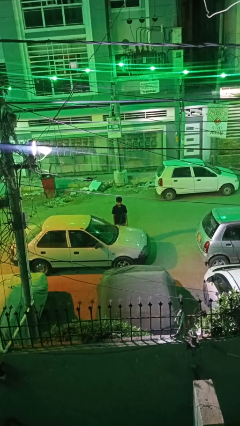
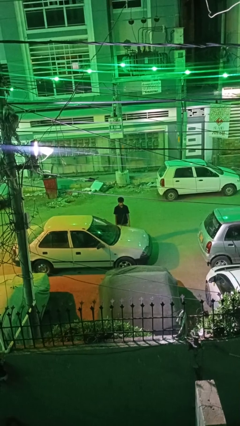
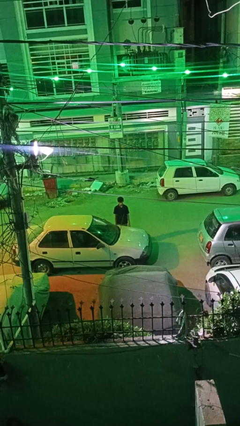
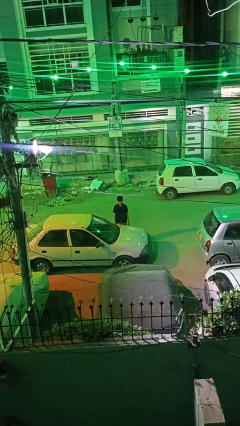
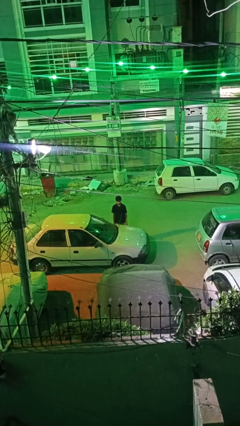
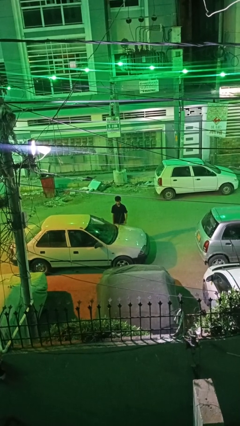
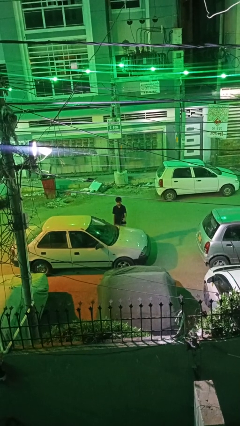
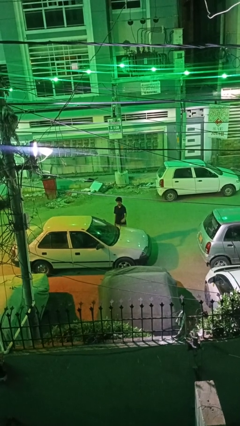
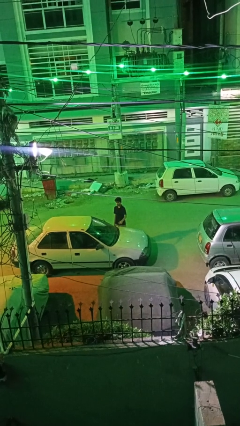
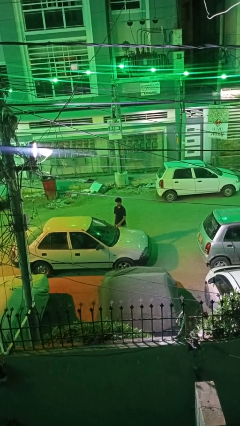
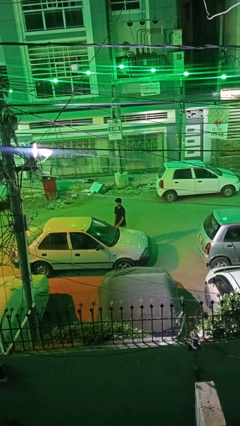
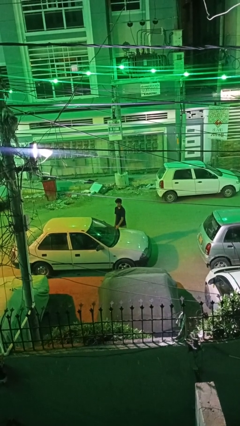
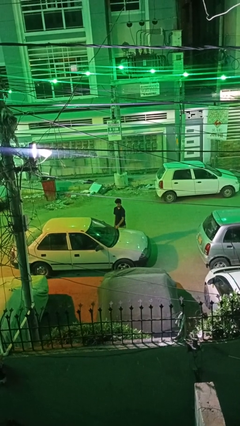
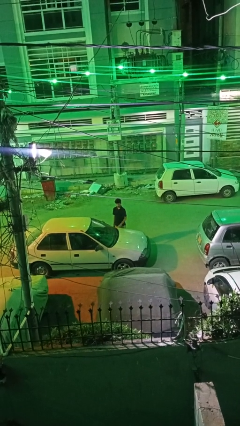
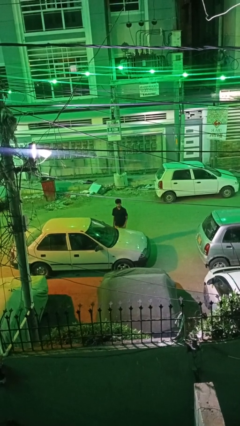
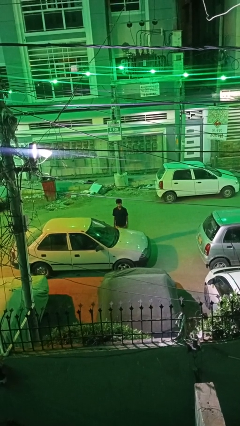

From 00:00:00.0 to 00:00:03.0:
person flips down car wipers

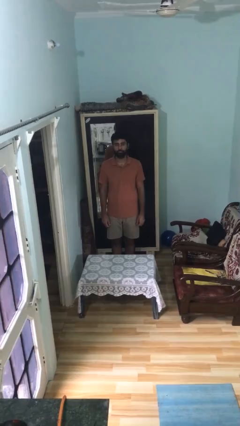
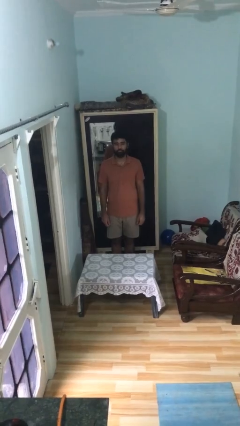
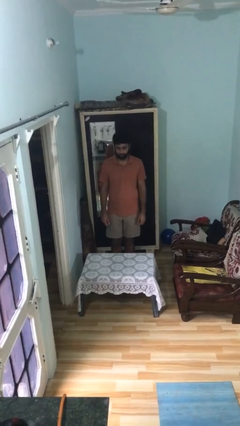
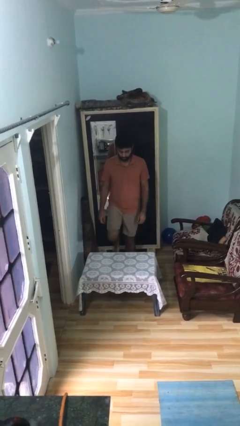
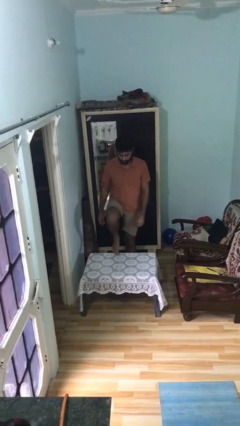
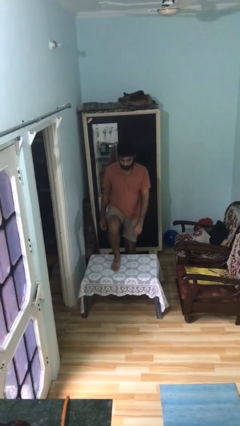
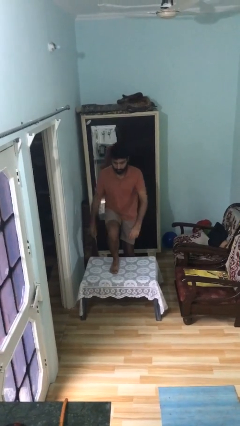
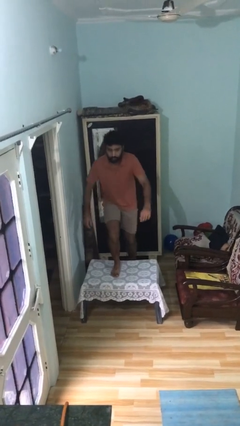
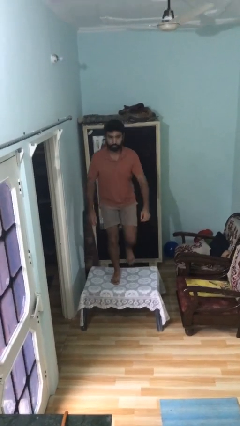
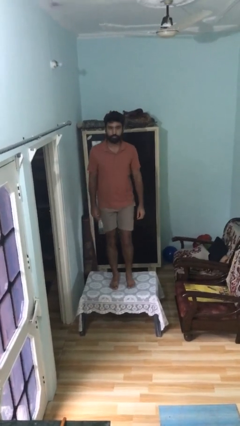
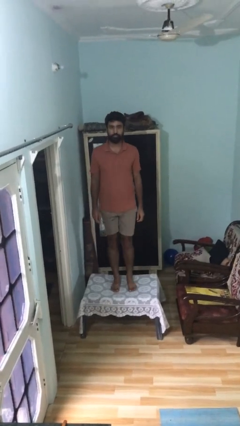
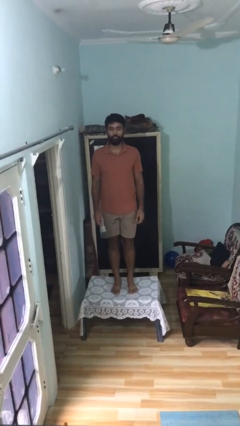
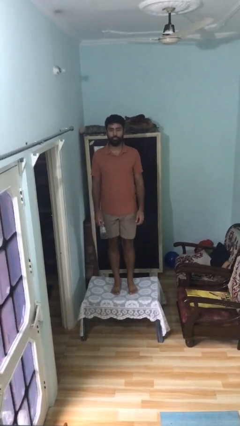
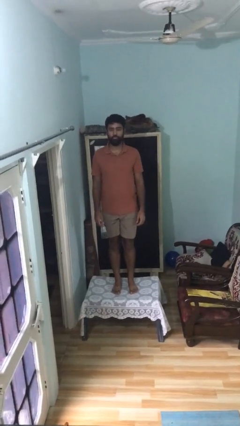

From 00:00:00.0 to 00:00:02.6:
person climbs on table

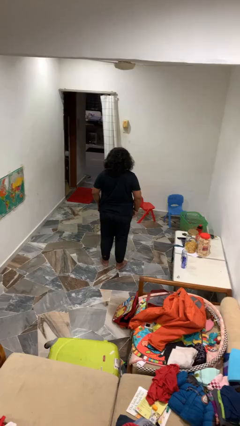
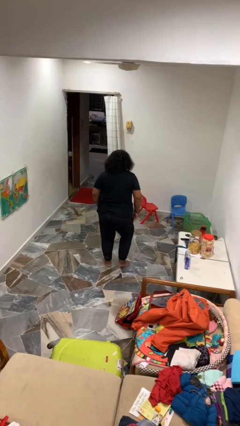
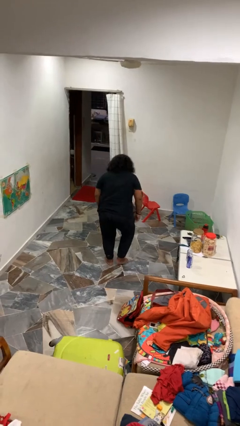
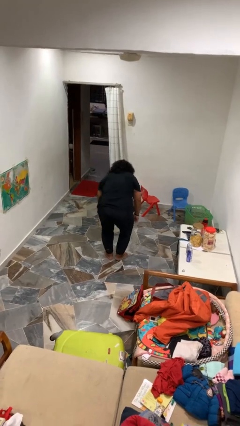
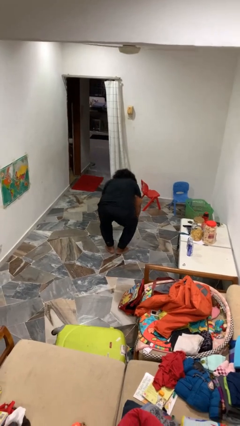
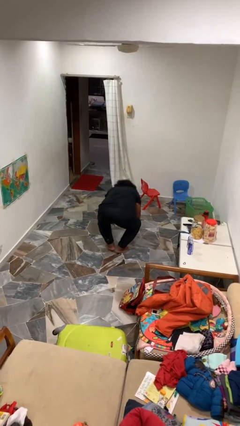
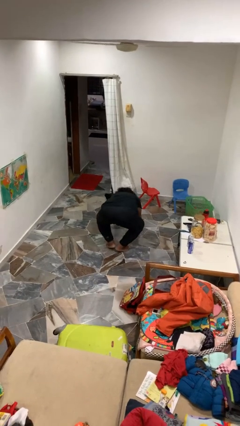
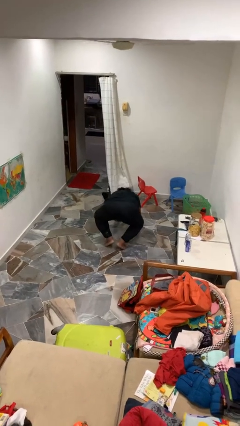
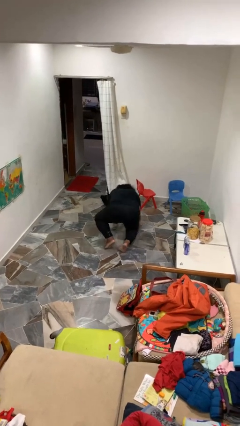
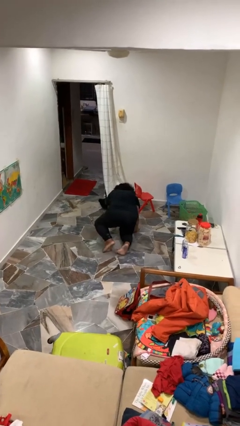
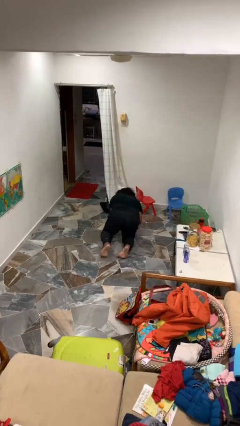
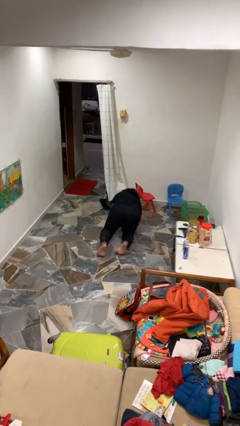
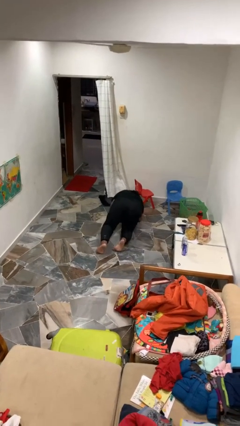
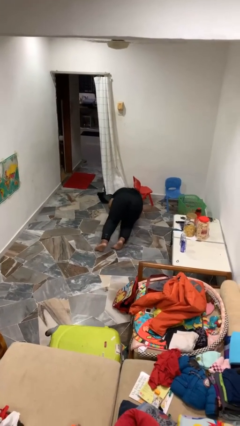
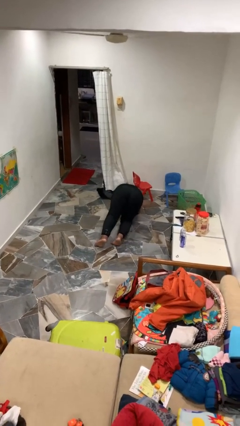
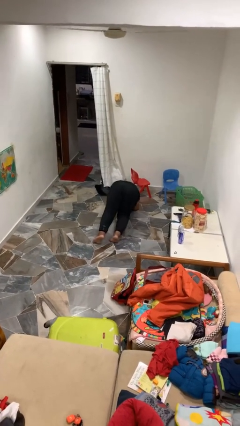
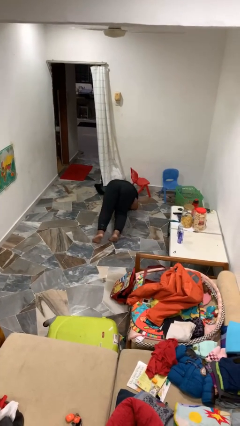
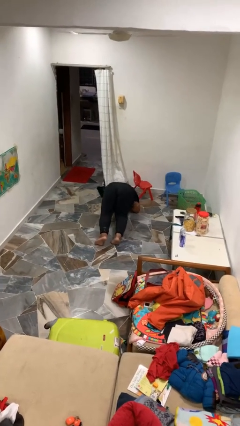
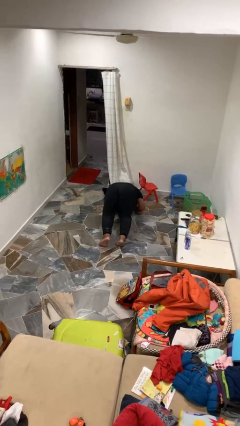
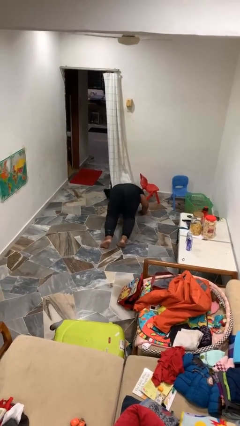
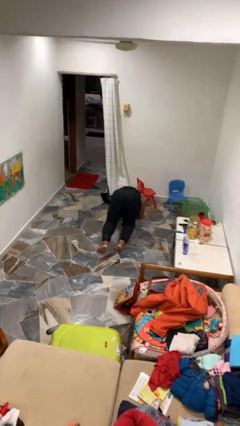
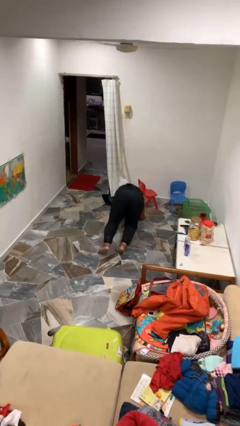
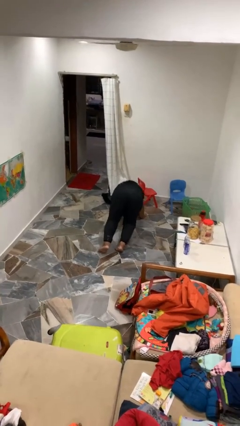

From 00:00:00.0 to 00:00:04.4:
person exercises with plank

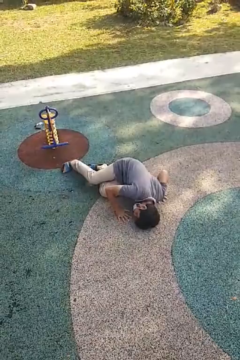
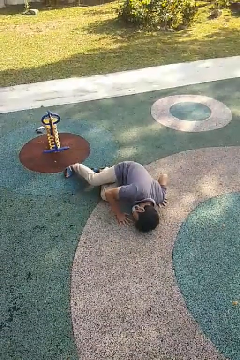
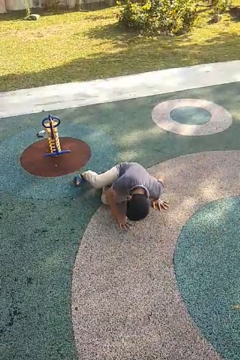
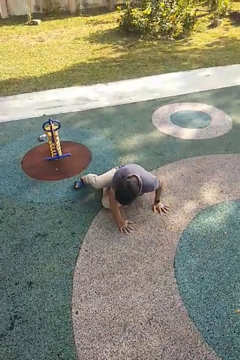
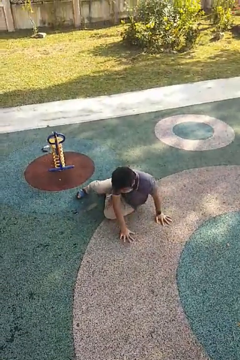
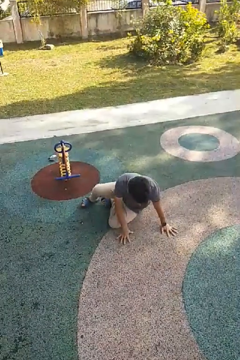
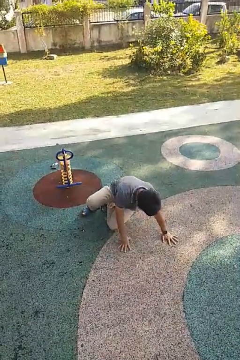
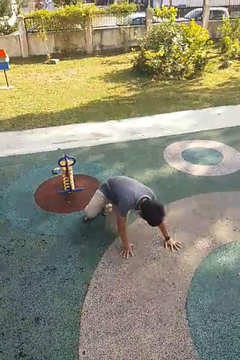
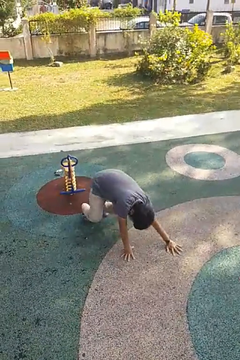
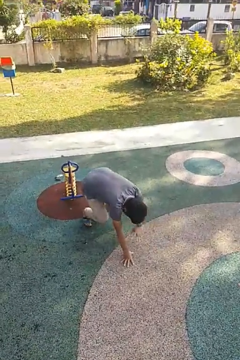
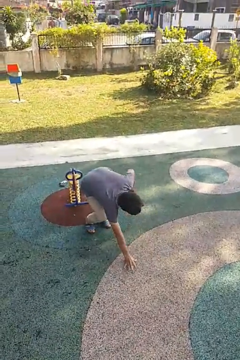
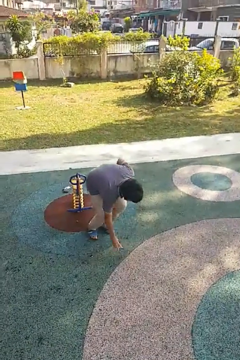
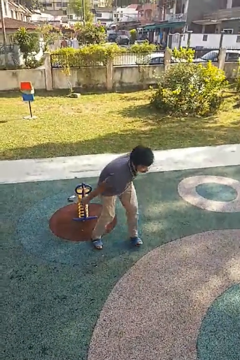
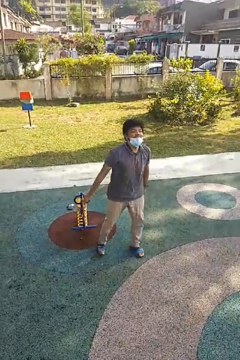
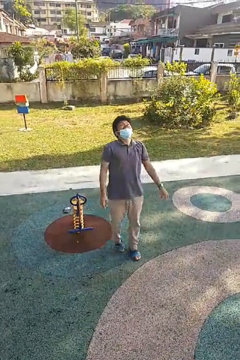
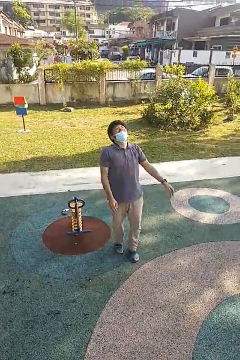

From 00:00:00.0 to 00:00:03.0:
person stands up from floor

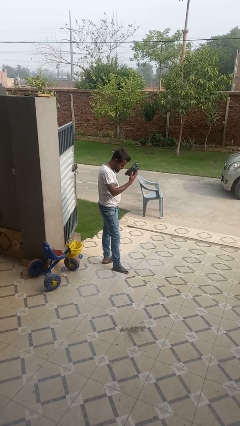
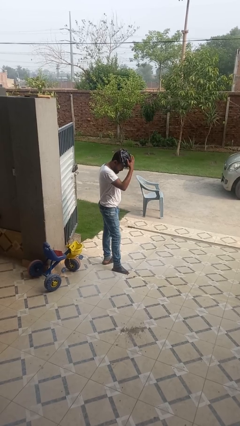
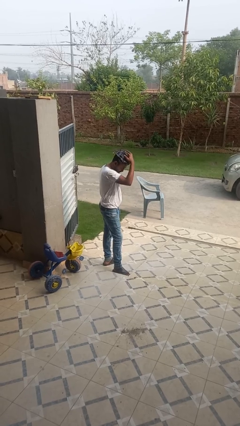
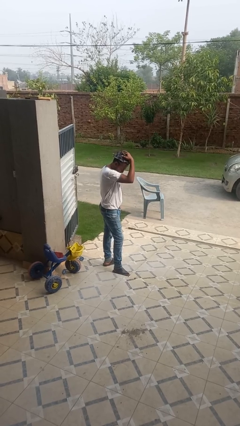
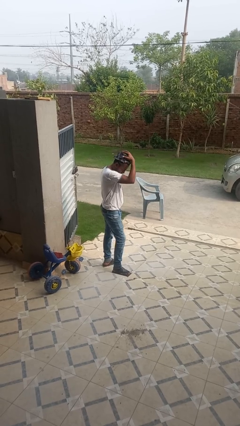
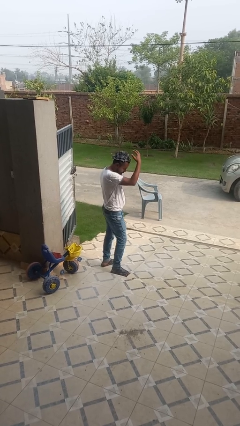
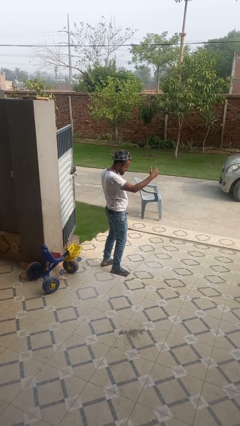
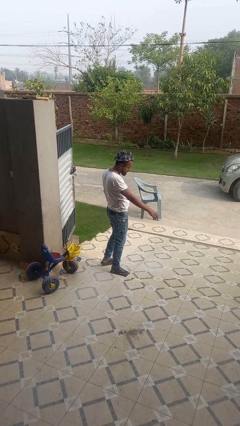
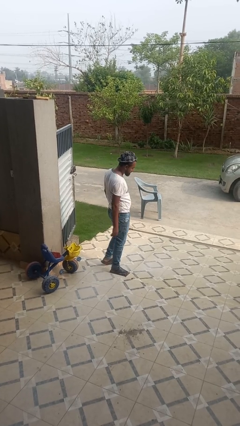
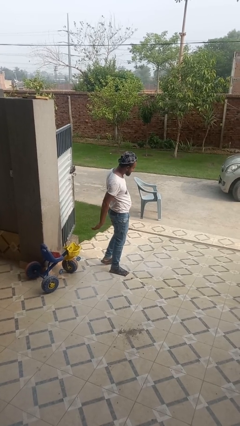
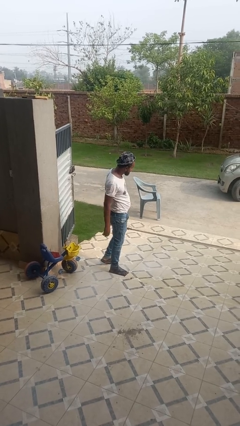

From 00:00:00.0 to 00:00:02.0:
person puts on hat

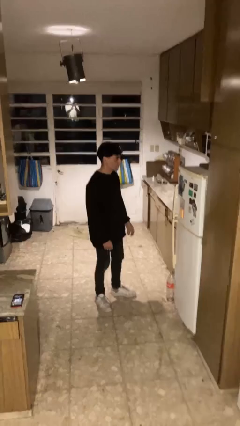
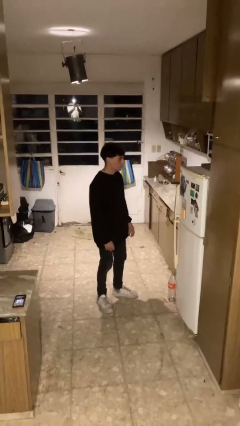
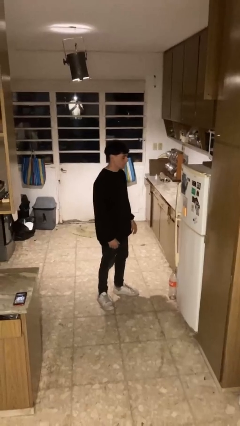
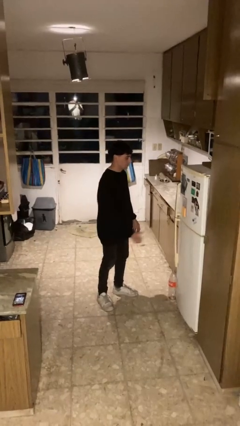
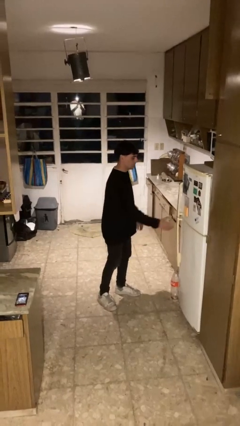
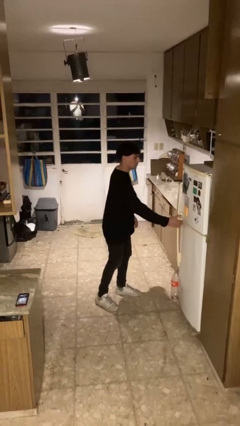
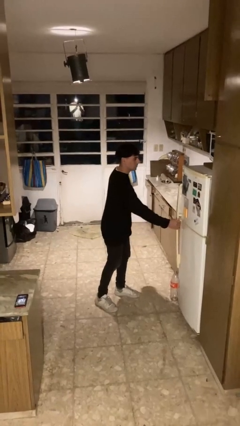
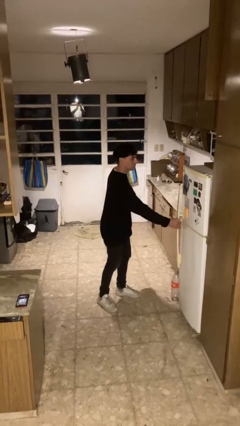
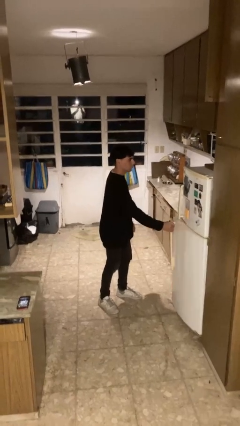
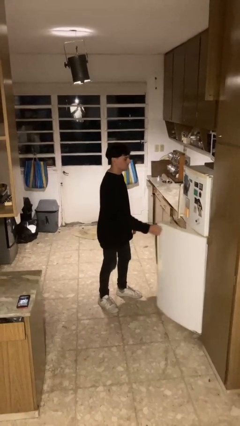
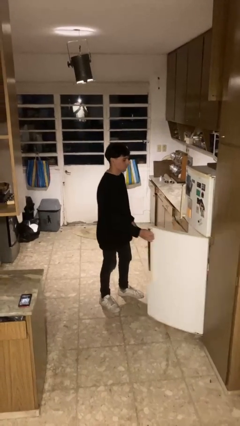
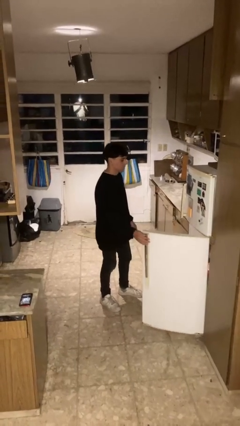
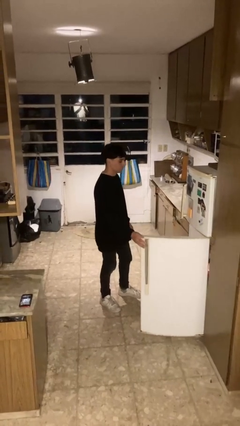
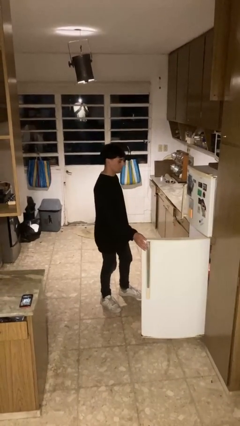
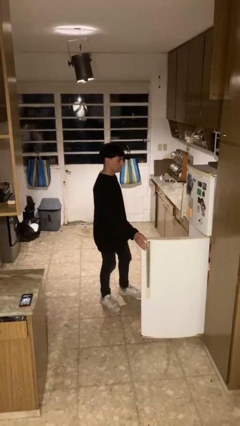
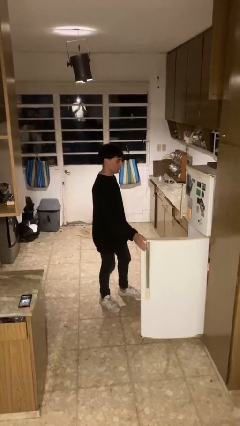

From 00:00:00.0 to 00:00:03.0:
person opens refrigerator
